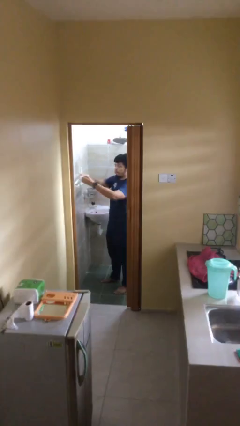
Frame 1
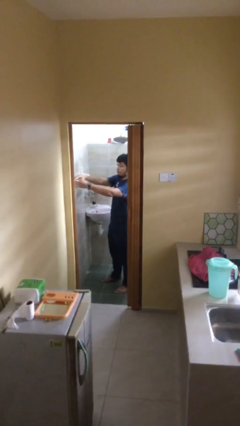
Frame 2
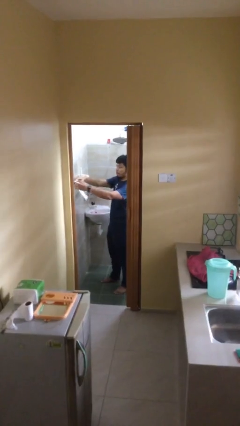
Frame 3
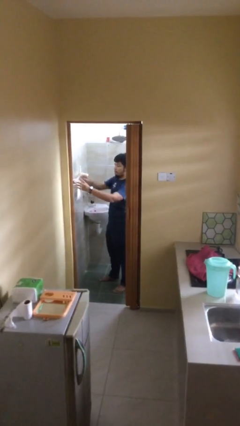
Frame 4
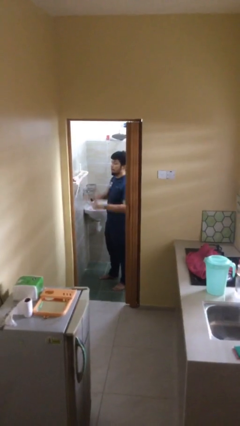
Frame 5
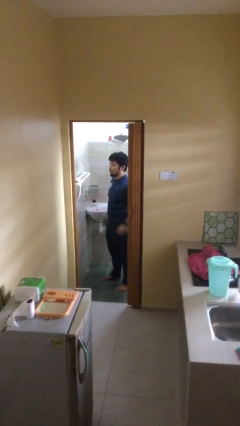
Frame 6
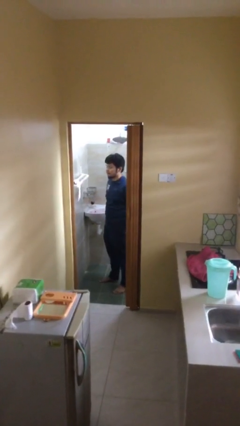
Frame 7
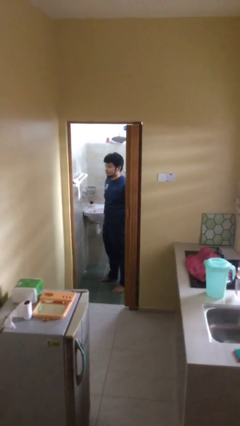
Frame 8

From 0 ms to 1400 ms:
person puts down object on countertop

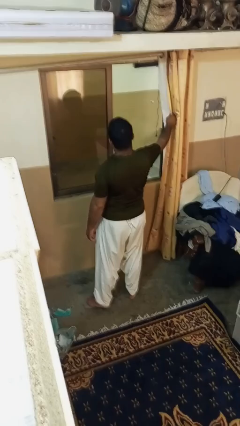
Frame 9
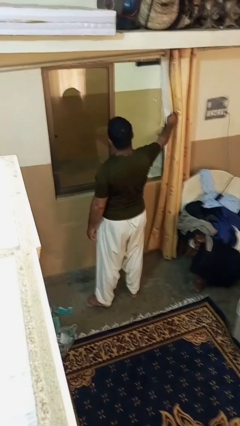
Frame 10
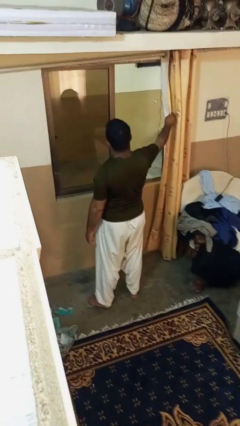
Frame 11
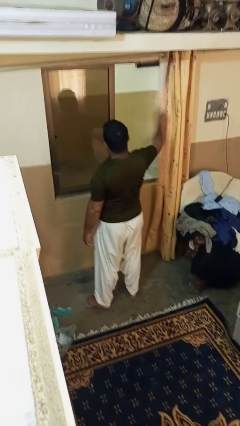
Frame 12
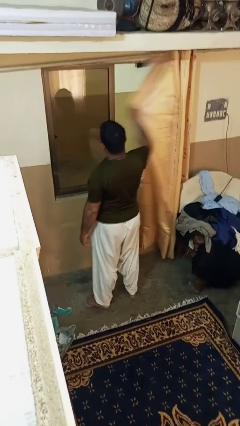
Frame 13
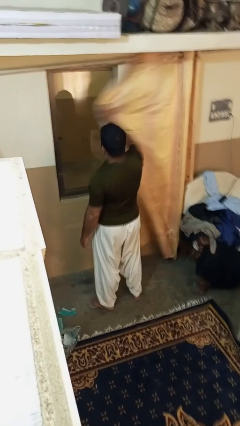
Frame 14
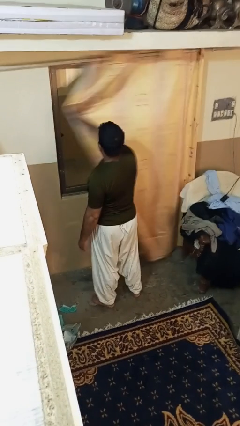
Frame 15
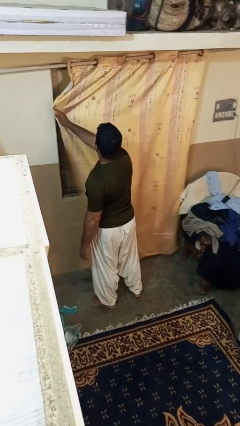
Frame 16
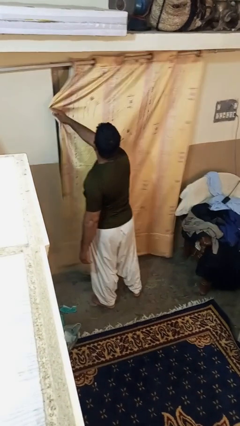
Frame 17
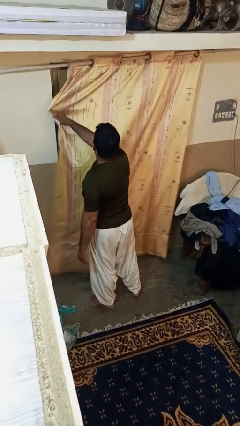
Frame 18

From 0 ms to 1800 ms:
person closes curtains

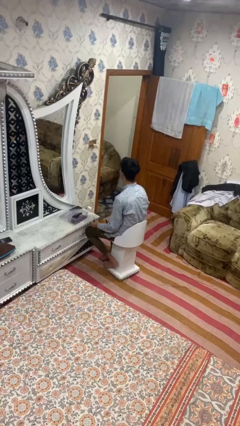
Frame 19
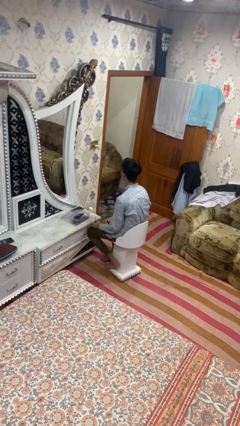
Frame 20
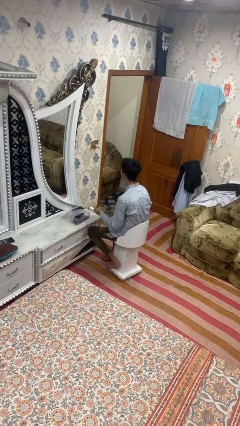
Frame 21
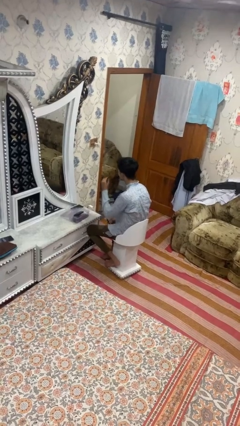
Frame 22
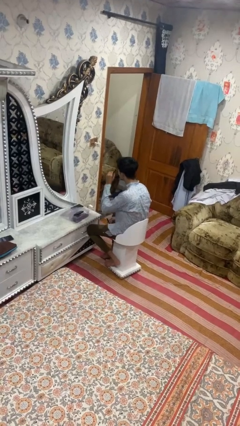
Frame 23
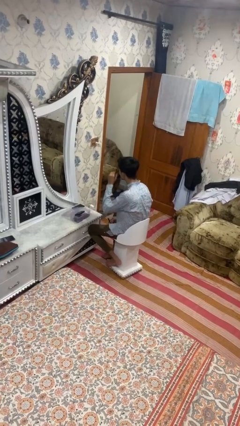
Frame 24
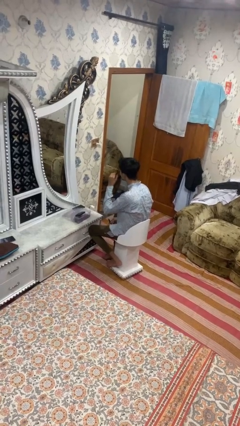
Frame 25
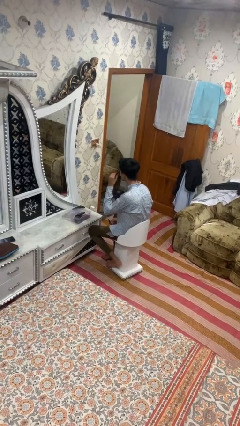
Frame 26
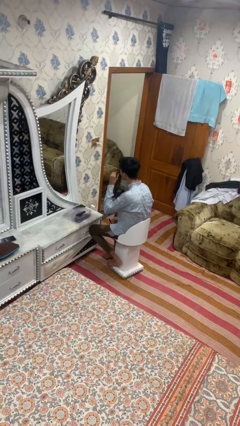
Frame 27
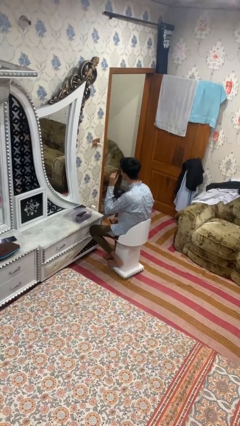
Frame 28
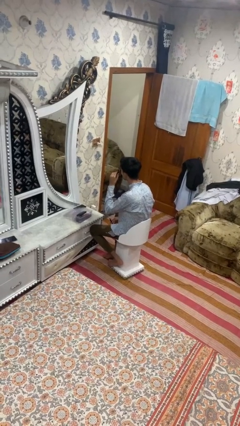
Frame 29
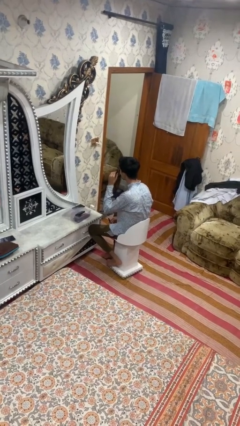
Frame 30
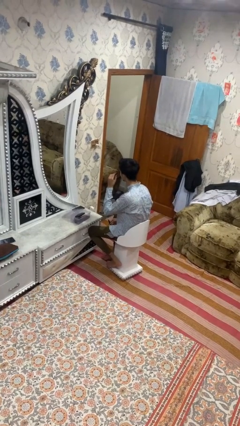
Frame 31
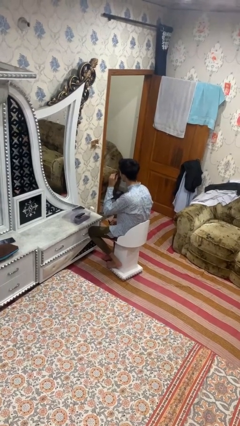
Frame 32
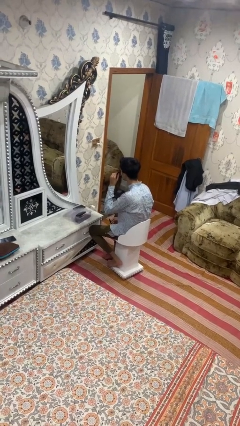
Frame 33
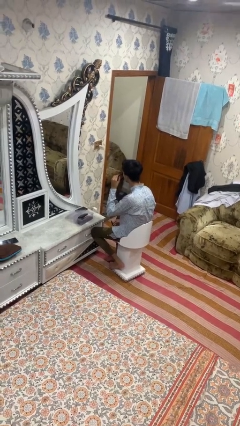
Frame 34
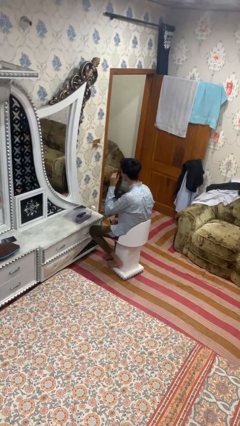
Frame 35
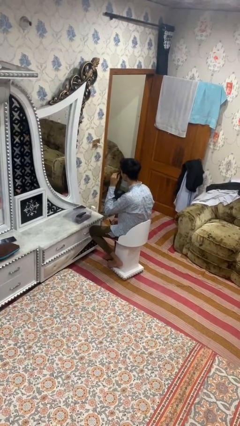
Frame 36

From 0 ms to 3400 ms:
person applies eye makeup

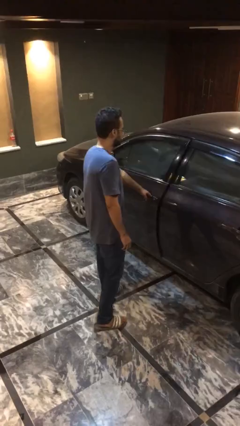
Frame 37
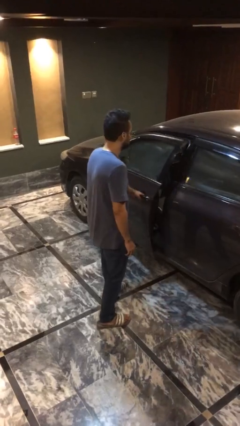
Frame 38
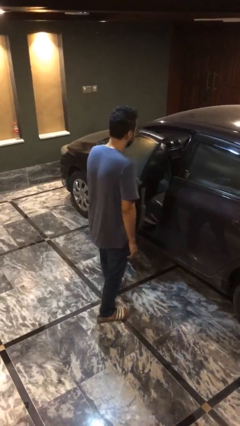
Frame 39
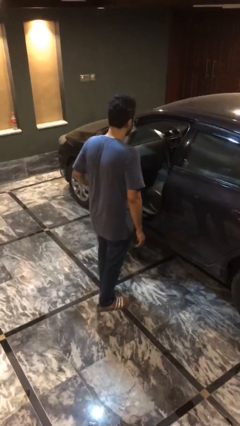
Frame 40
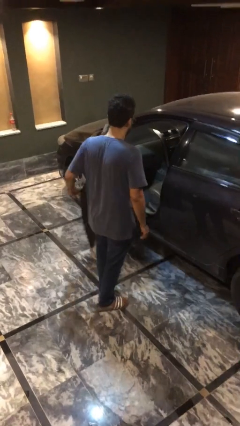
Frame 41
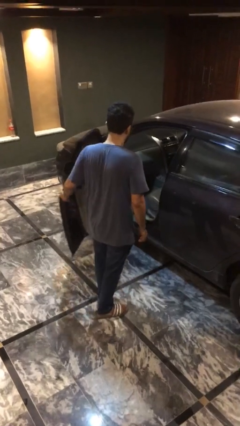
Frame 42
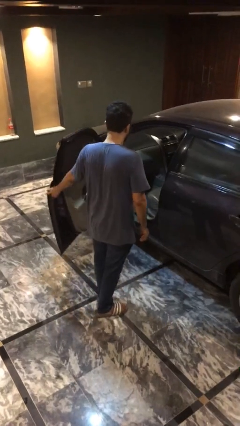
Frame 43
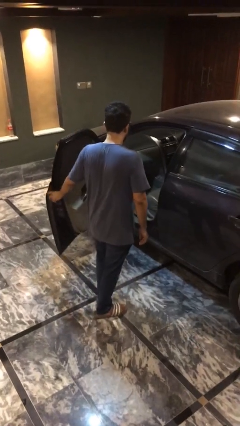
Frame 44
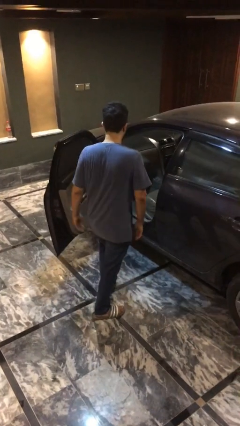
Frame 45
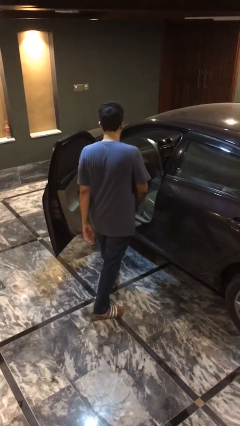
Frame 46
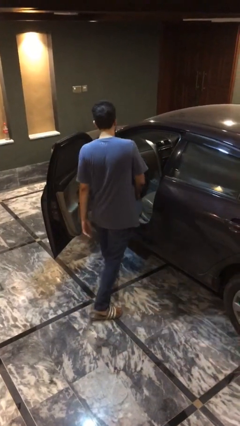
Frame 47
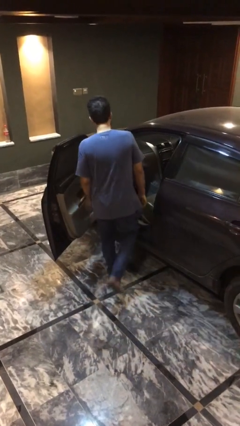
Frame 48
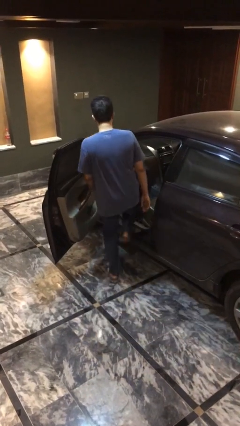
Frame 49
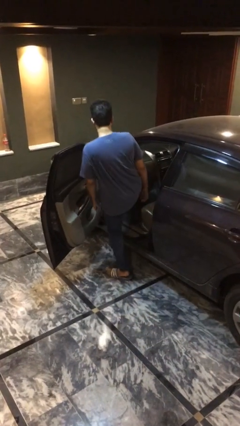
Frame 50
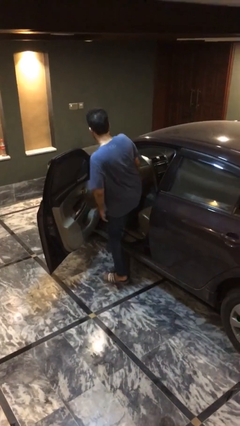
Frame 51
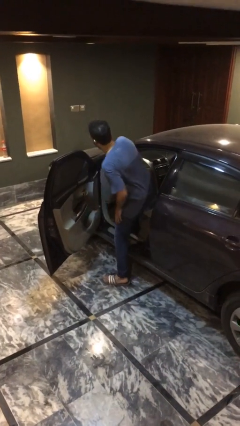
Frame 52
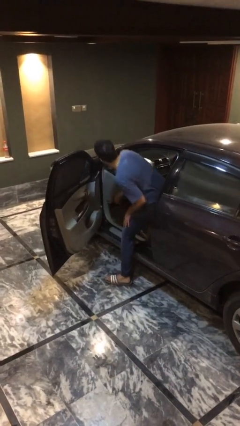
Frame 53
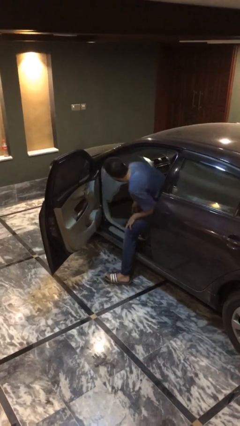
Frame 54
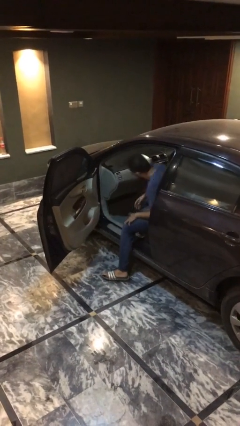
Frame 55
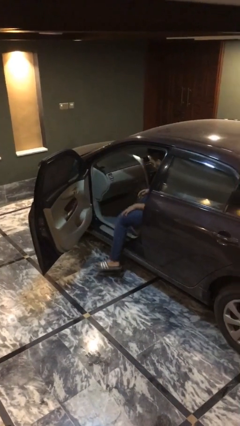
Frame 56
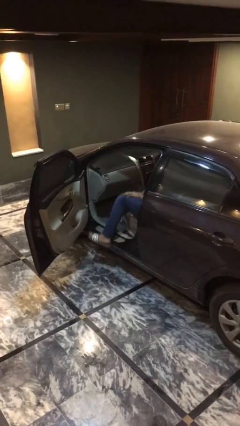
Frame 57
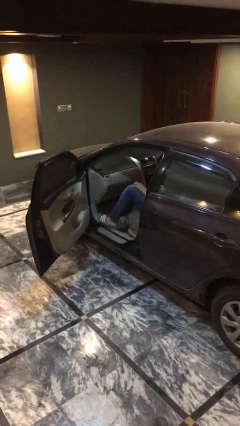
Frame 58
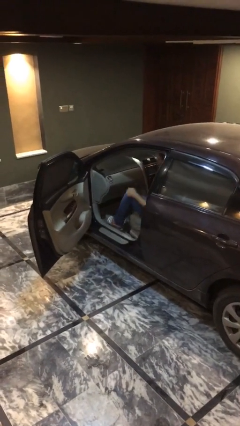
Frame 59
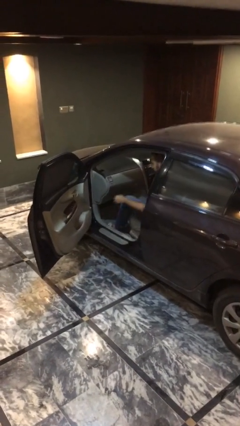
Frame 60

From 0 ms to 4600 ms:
person enters car

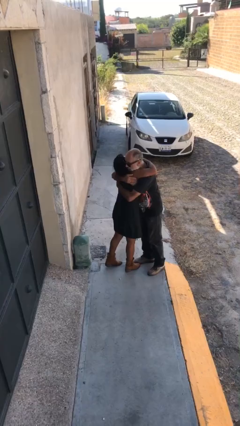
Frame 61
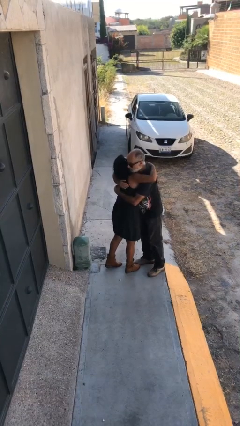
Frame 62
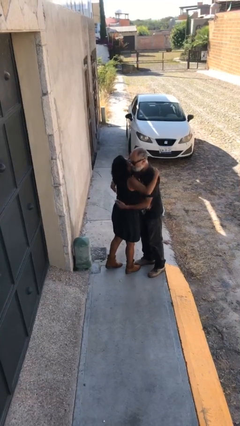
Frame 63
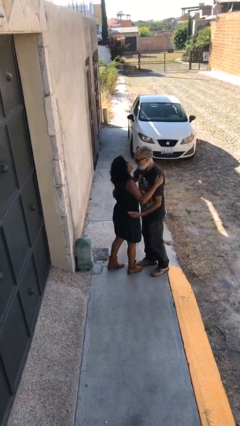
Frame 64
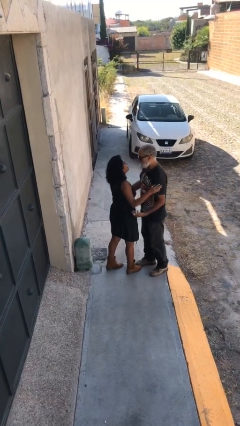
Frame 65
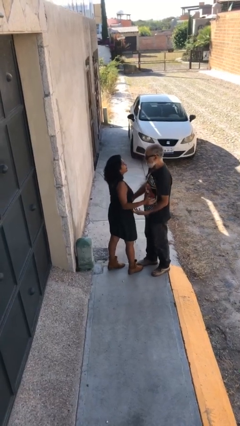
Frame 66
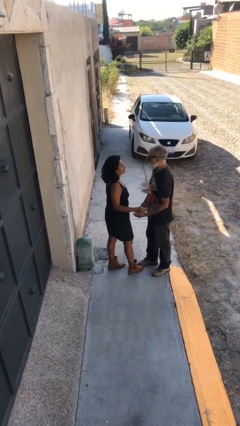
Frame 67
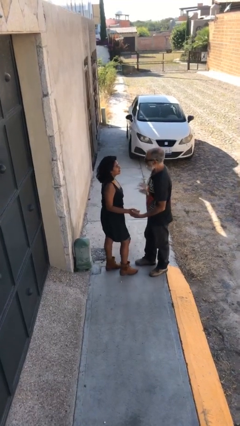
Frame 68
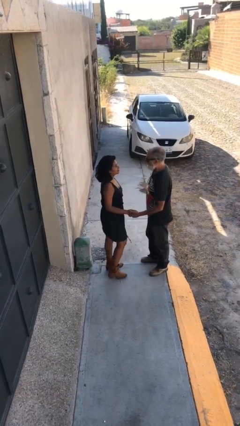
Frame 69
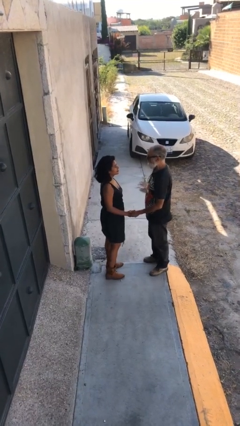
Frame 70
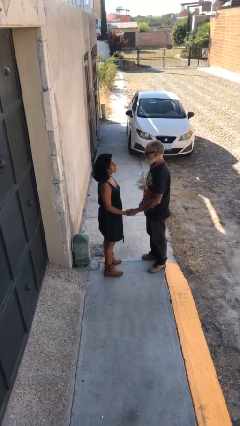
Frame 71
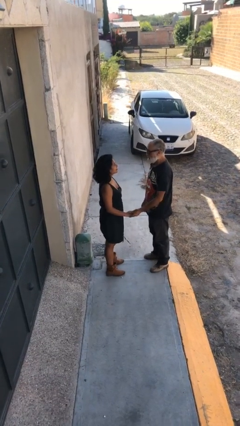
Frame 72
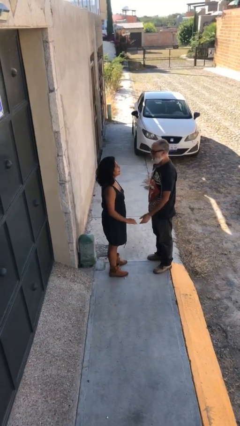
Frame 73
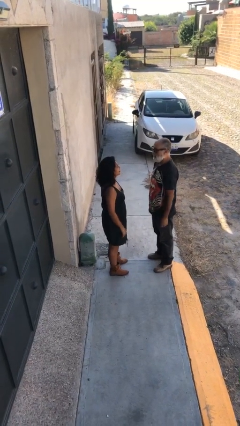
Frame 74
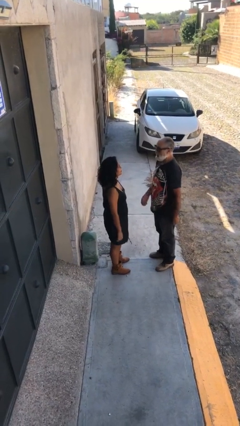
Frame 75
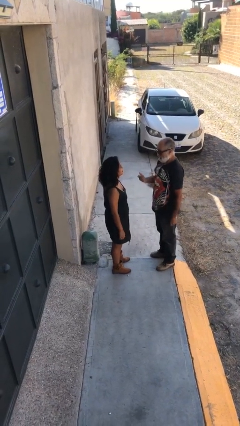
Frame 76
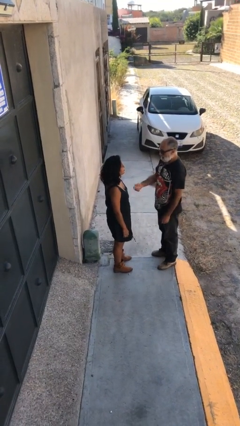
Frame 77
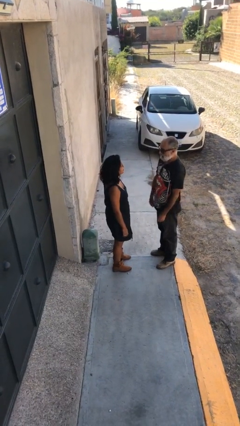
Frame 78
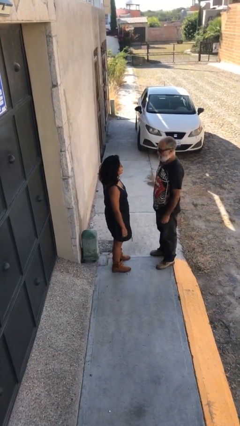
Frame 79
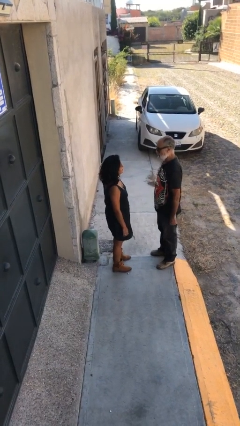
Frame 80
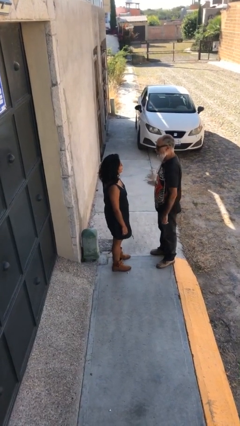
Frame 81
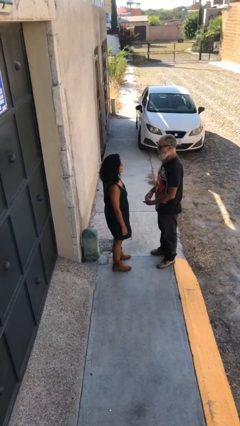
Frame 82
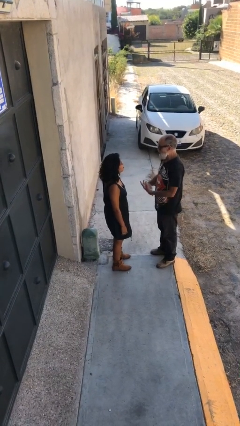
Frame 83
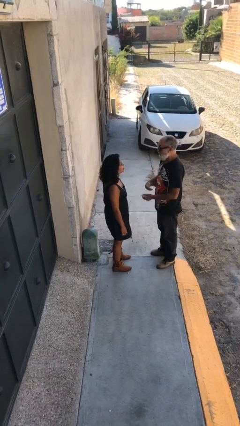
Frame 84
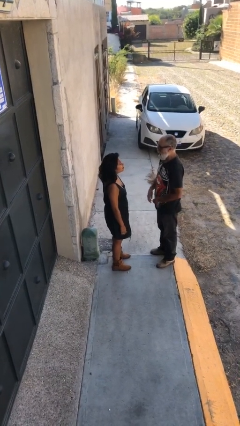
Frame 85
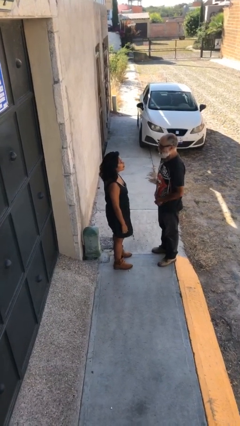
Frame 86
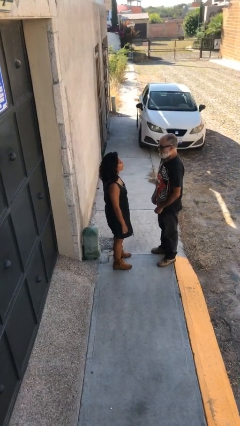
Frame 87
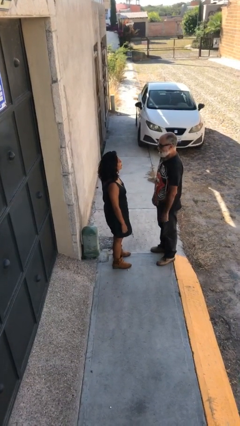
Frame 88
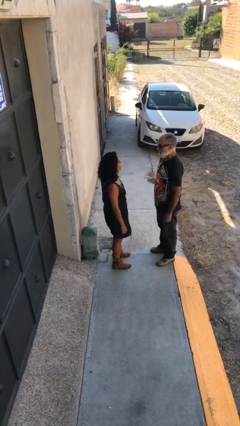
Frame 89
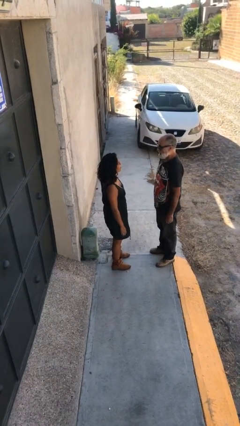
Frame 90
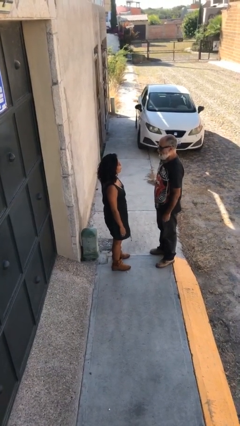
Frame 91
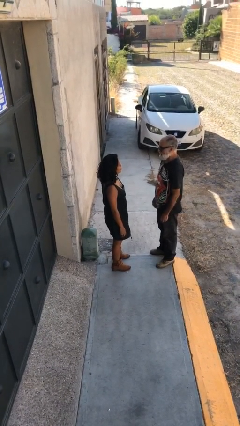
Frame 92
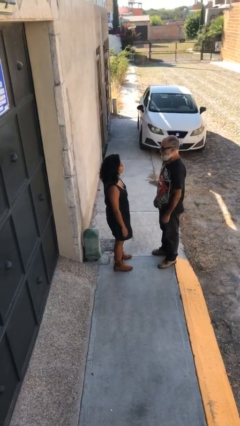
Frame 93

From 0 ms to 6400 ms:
person talks to person
